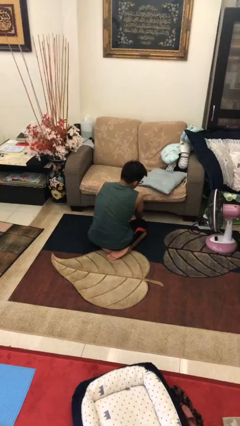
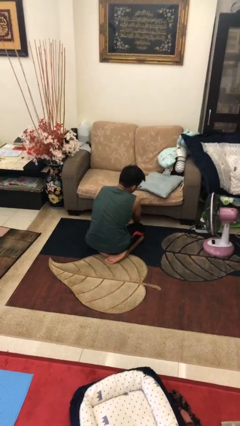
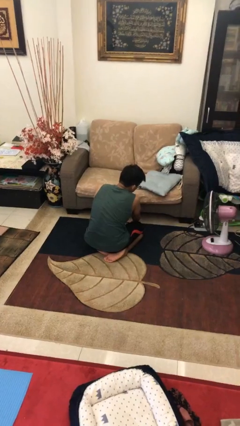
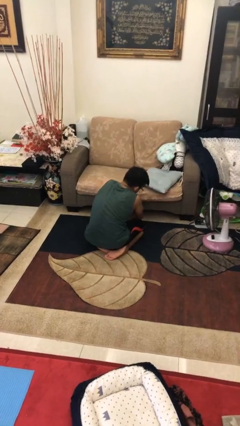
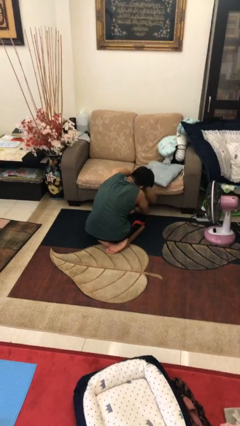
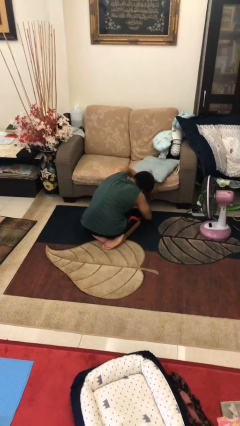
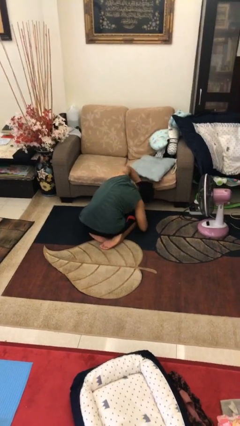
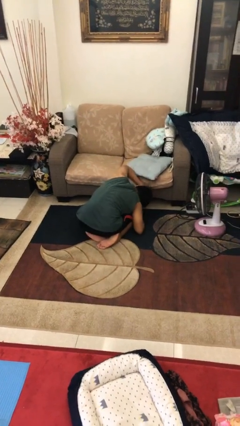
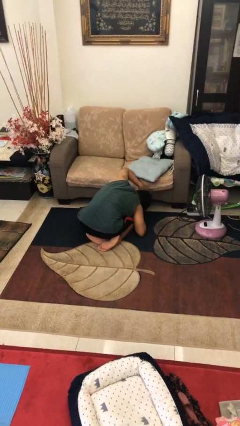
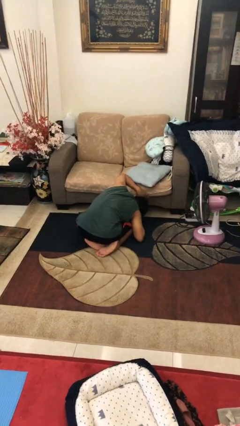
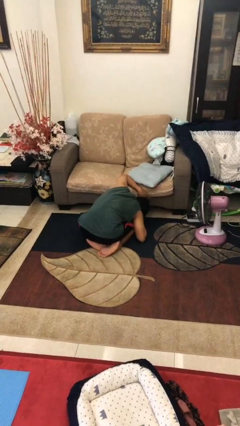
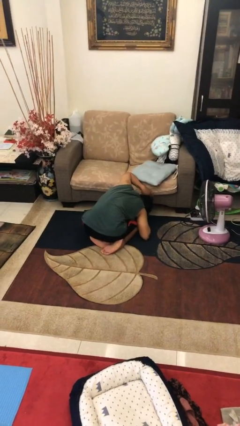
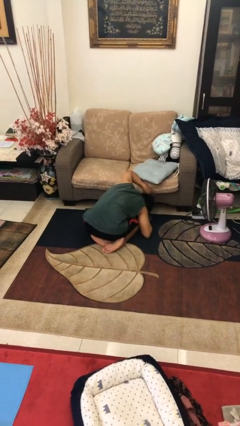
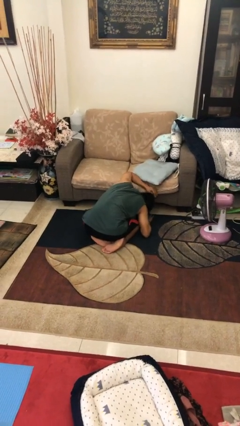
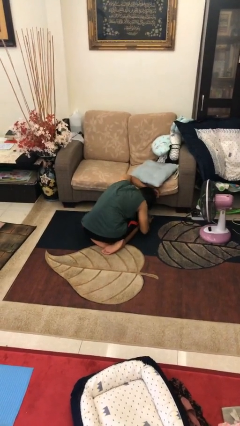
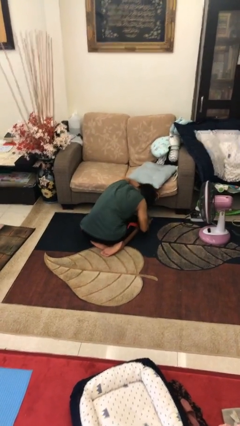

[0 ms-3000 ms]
person searches under couch

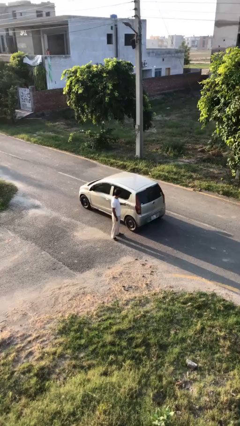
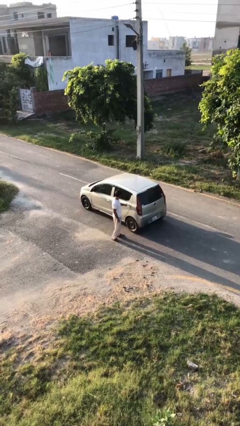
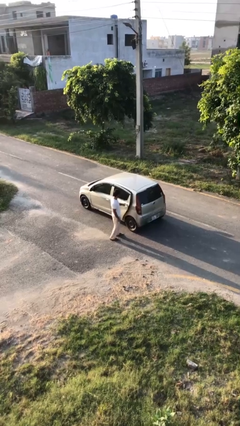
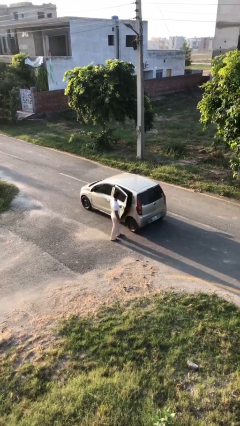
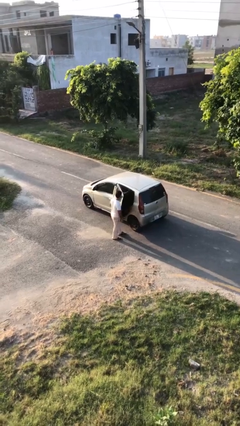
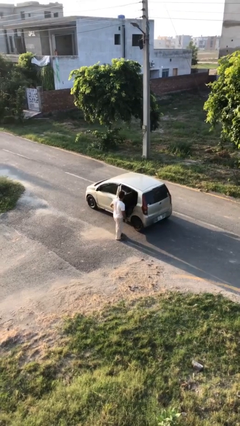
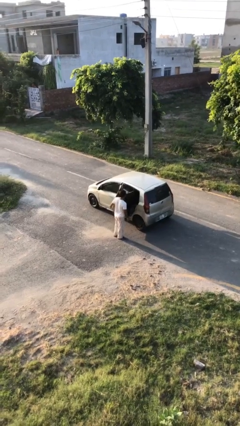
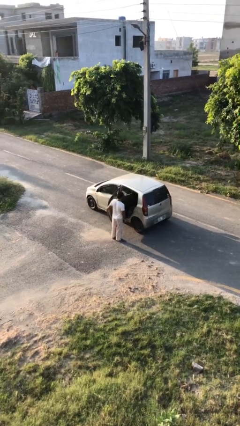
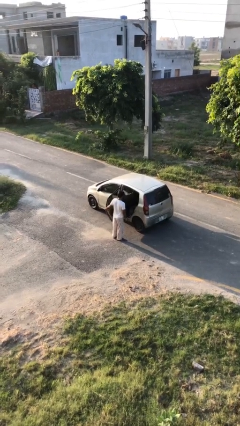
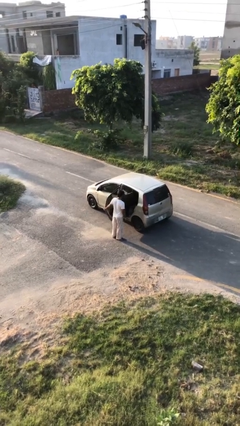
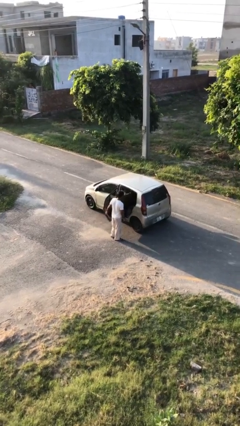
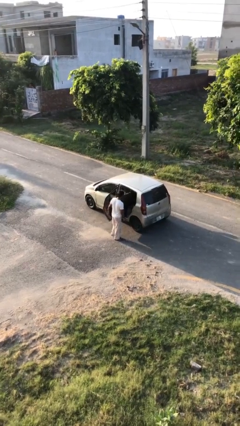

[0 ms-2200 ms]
person opens car door

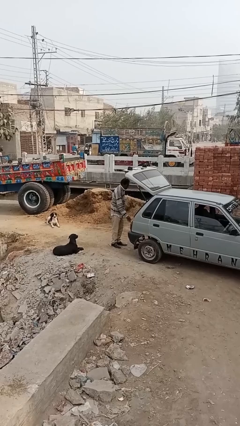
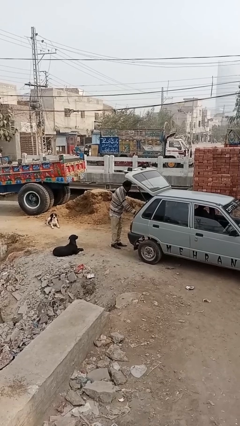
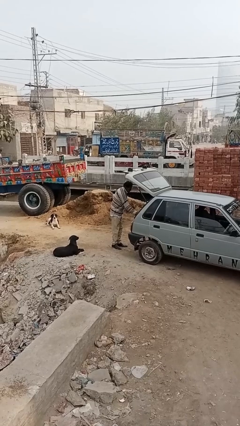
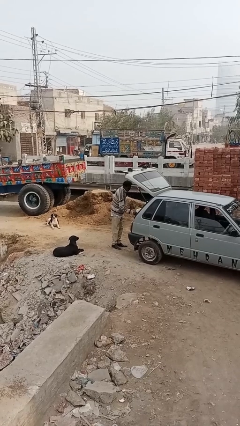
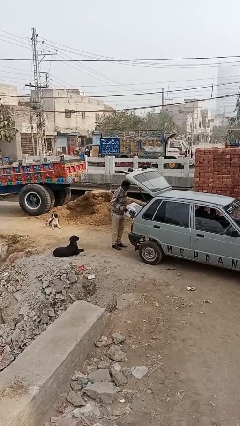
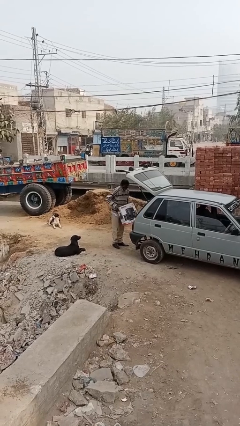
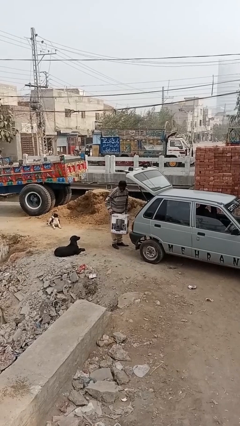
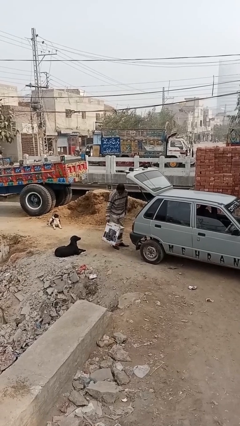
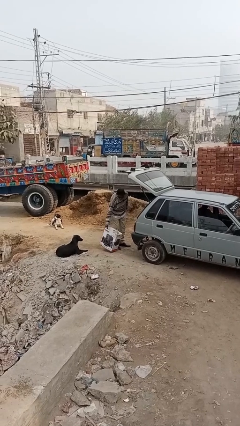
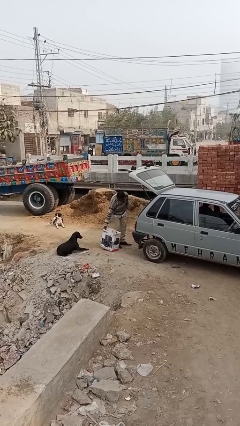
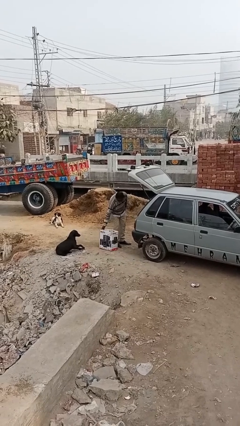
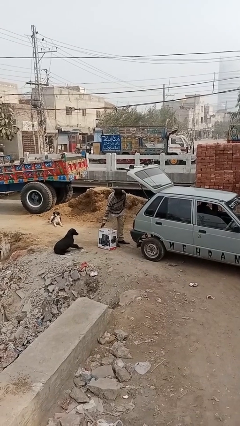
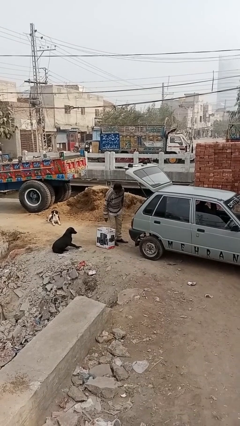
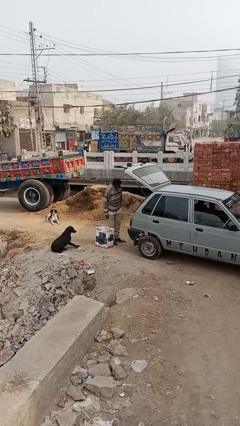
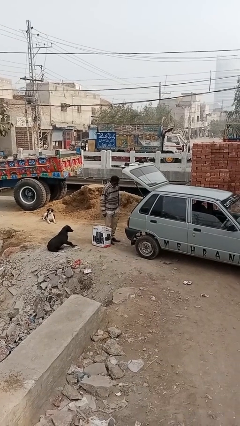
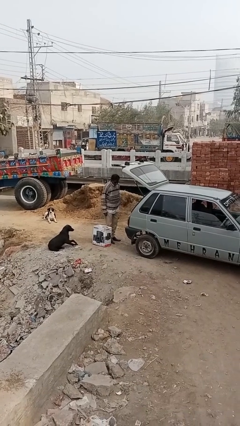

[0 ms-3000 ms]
person unloads car

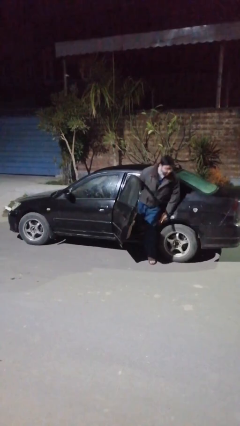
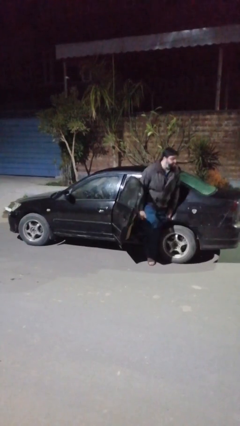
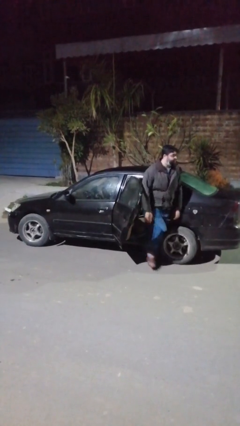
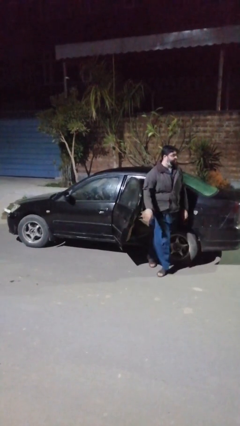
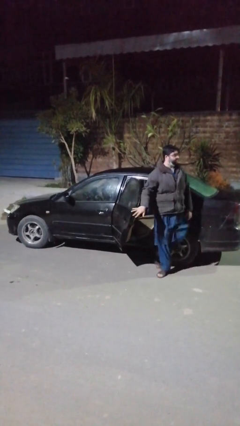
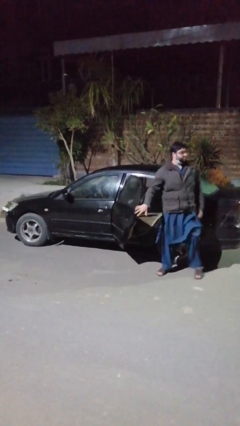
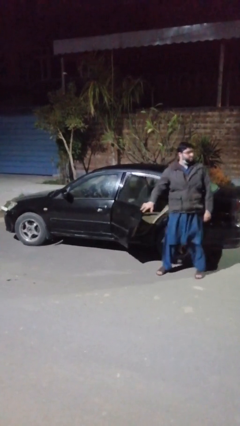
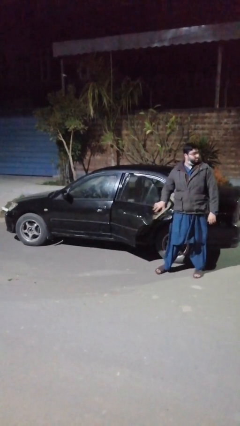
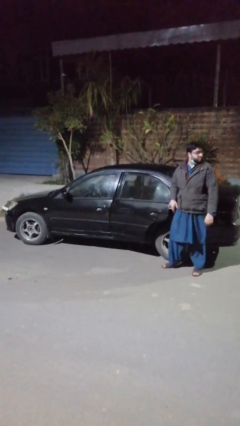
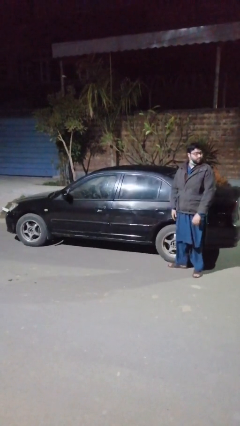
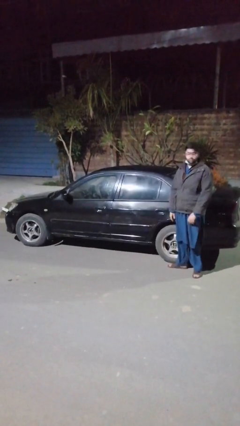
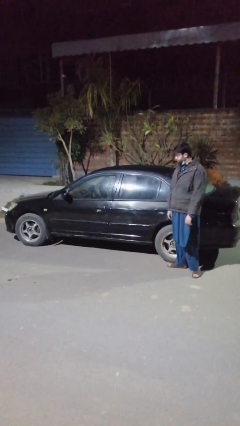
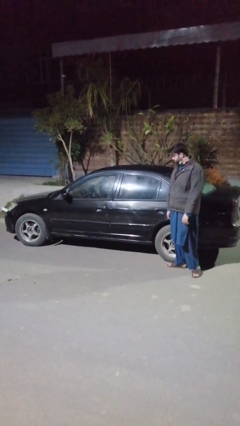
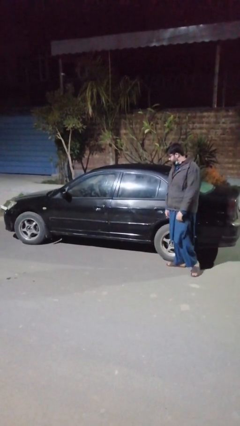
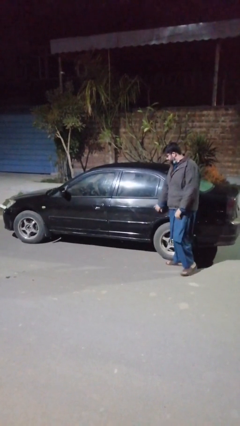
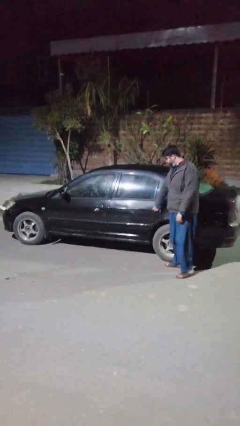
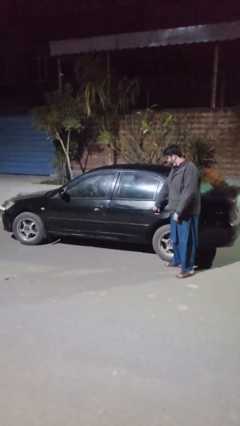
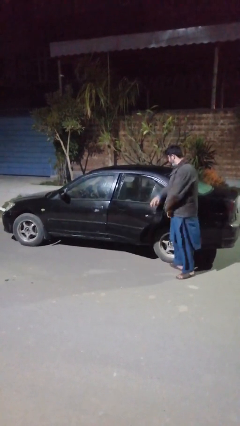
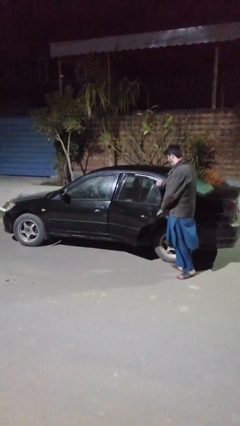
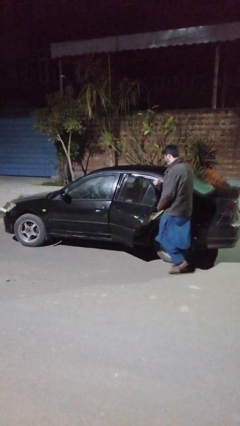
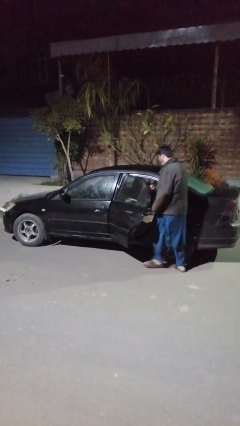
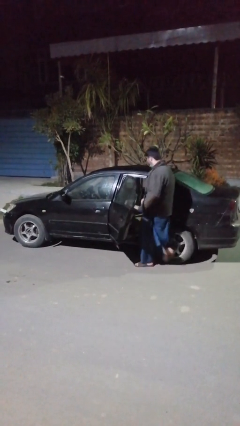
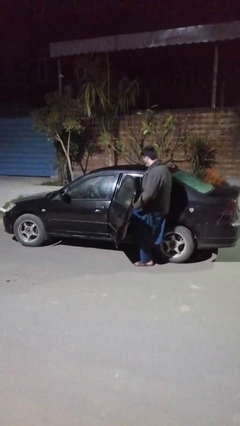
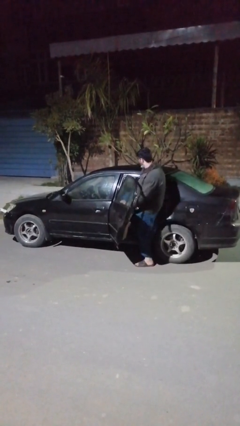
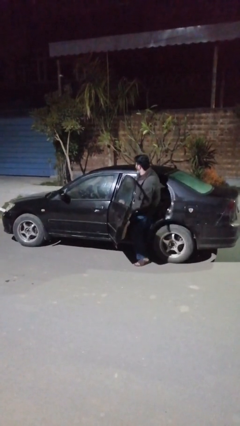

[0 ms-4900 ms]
car drops off person

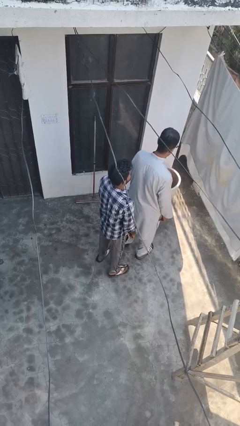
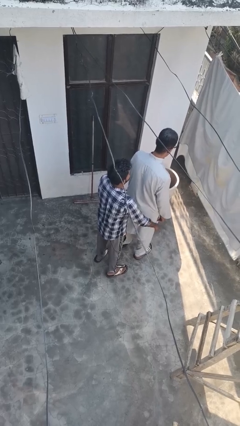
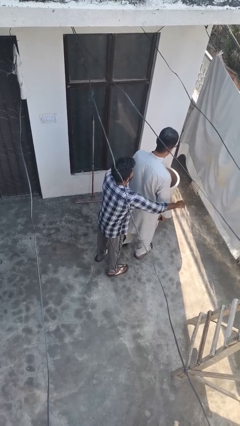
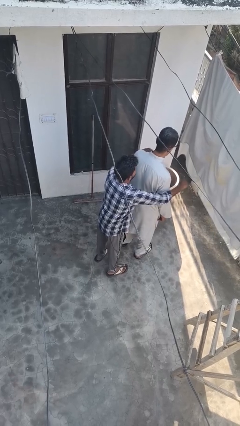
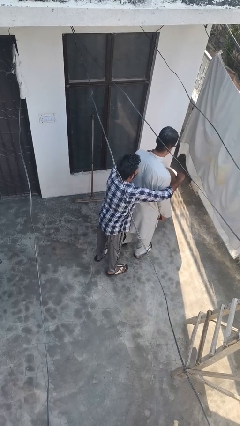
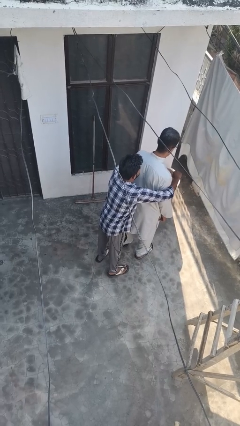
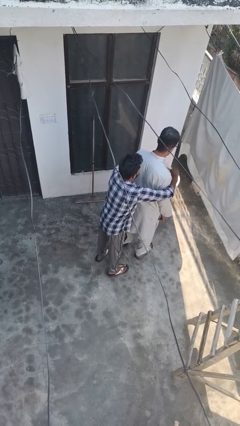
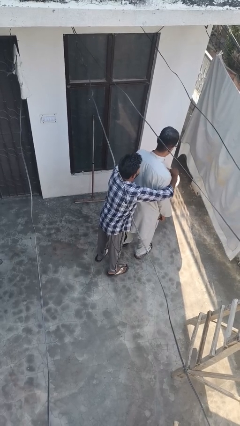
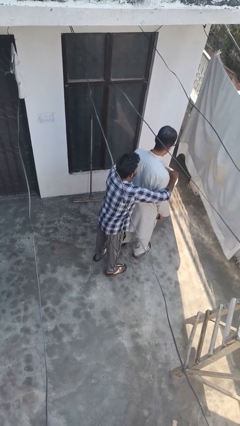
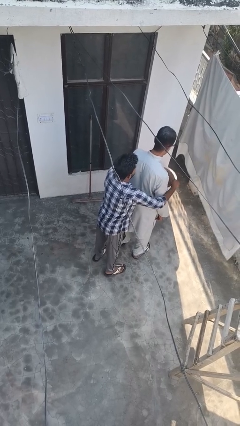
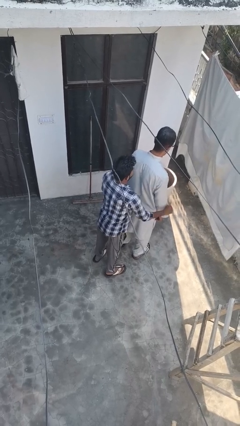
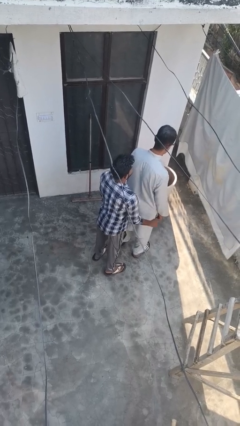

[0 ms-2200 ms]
person hugs person from behind

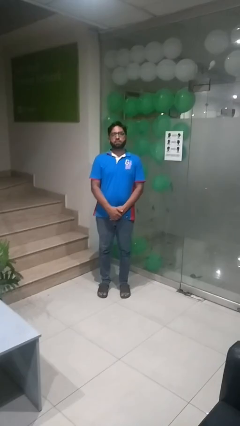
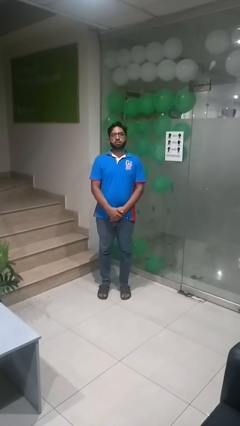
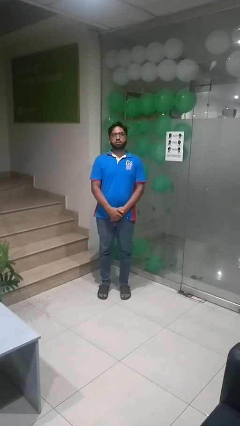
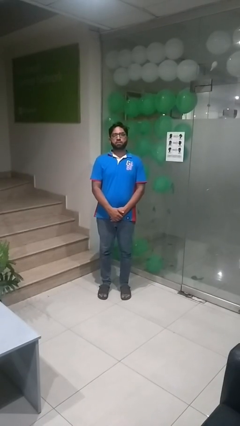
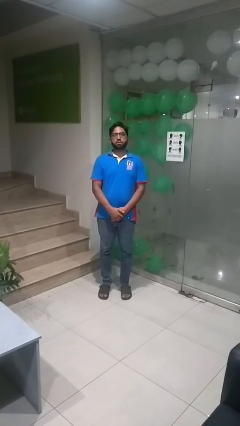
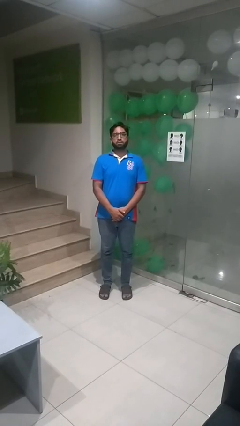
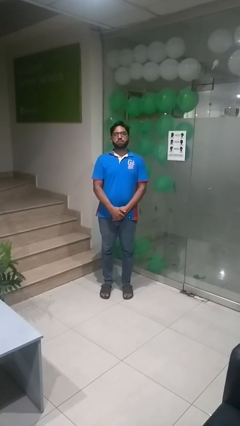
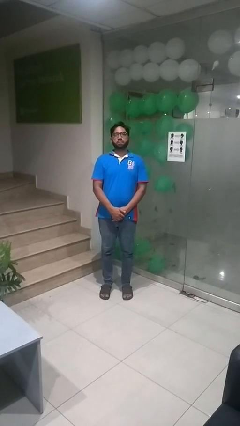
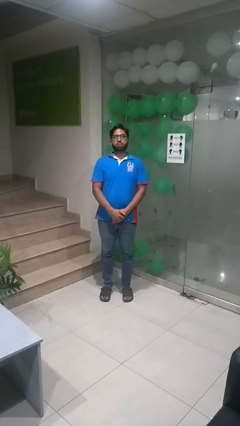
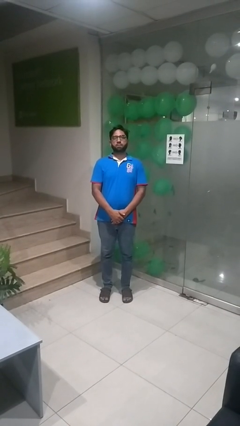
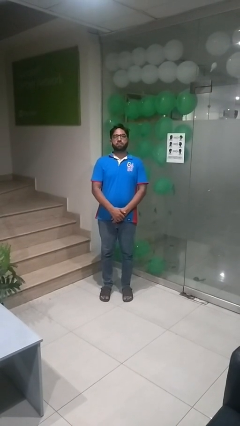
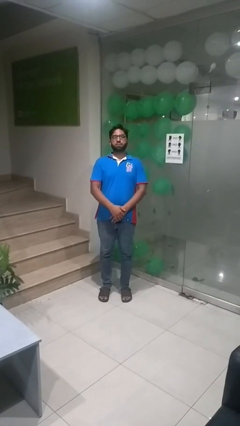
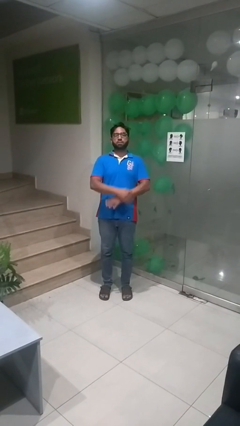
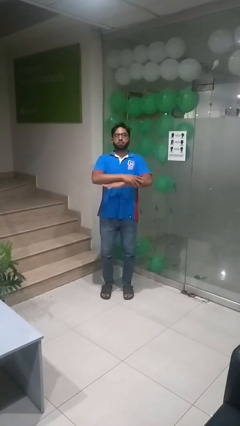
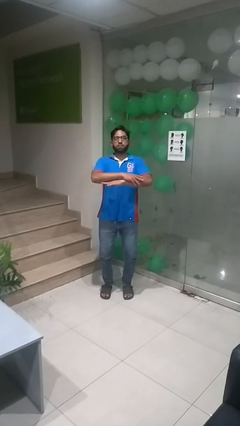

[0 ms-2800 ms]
person stands up
